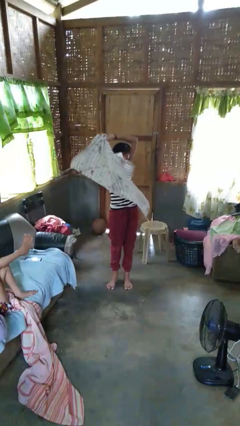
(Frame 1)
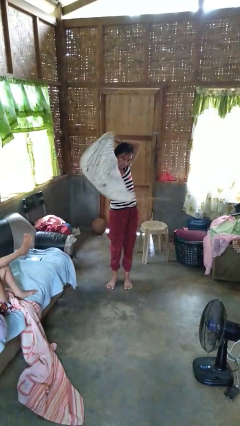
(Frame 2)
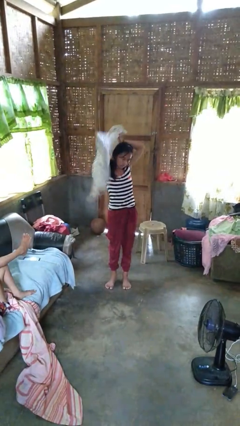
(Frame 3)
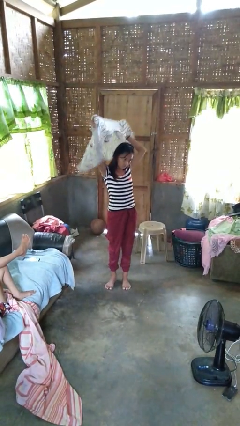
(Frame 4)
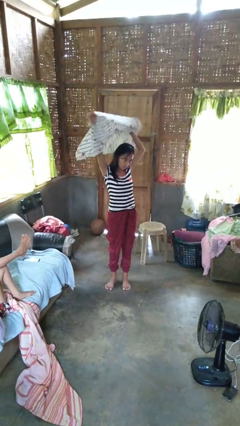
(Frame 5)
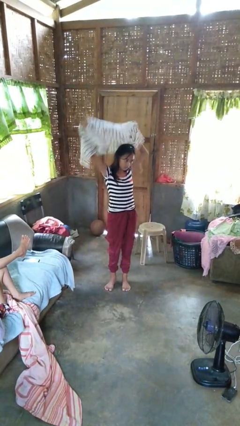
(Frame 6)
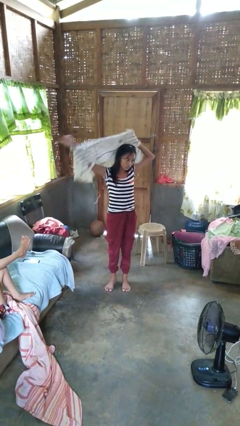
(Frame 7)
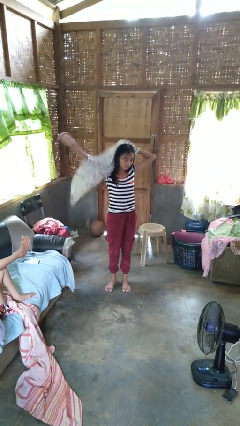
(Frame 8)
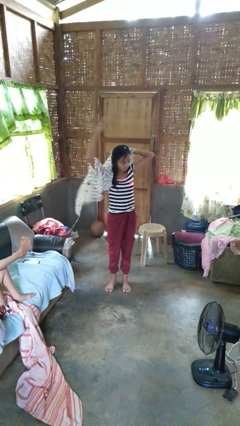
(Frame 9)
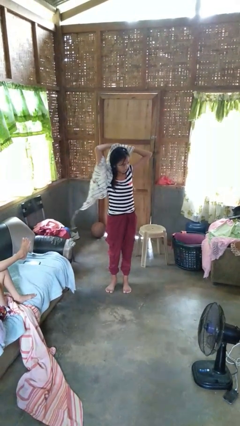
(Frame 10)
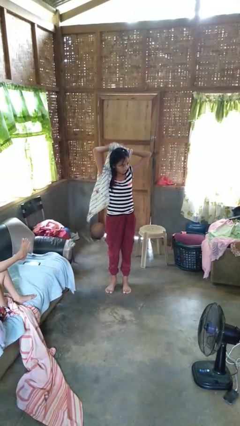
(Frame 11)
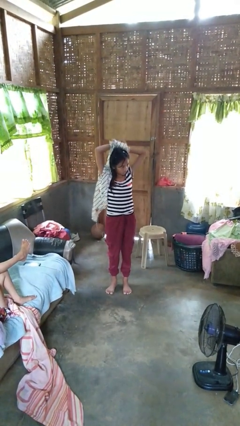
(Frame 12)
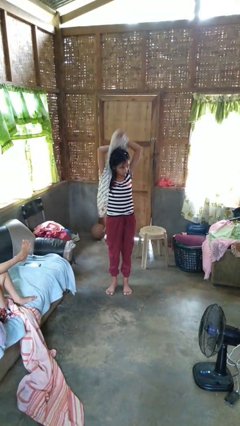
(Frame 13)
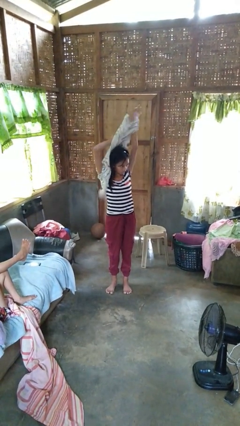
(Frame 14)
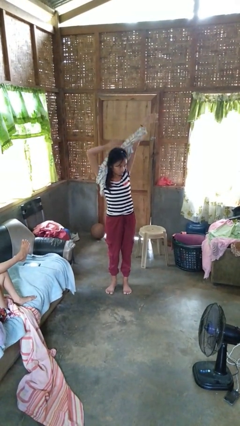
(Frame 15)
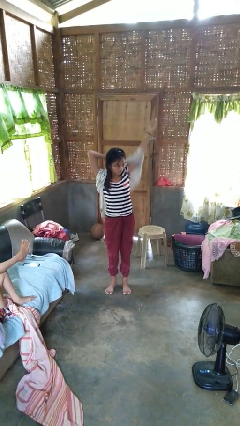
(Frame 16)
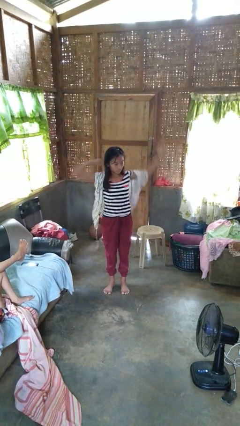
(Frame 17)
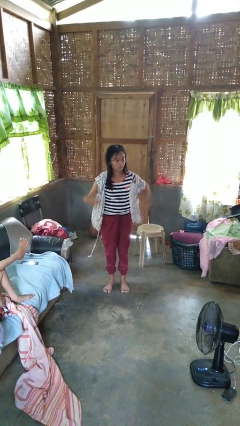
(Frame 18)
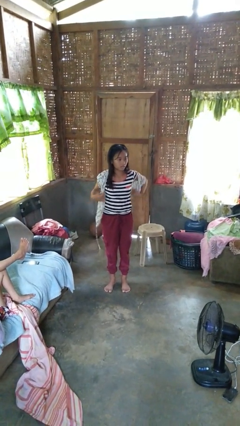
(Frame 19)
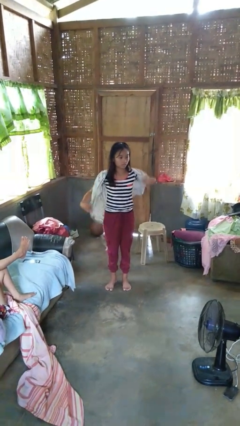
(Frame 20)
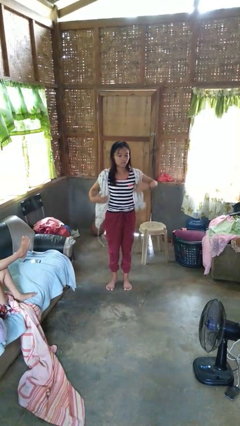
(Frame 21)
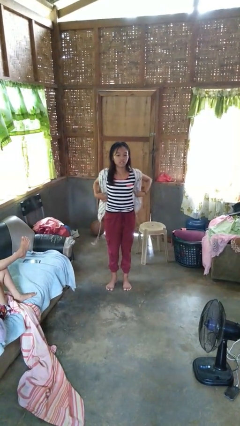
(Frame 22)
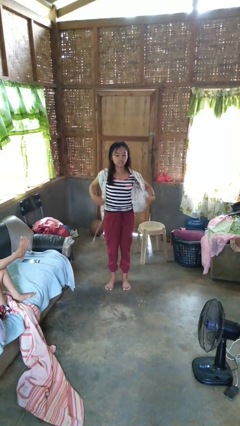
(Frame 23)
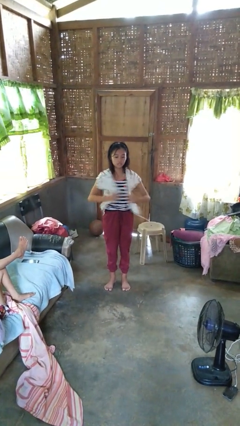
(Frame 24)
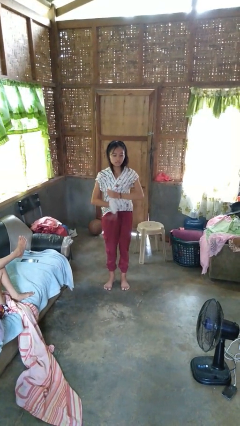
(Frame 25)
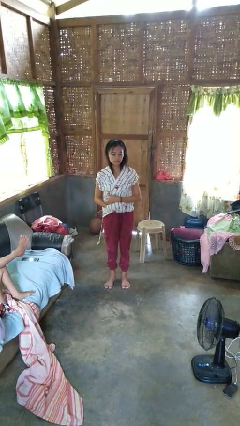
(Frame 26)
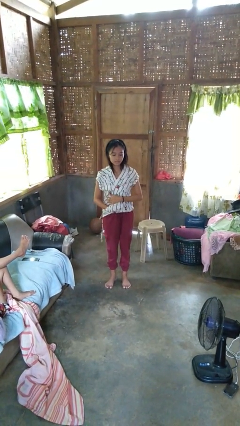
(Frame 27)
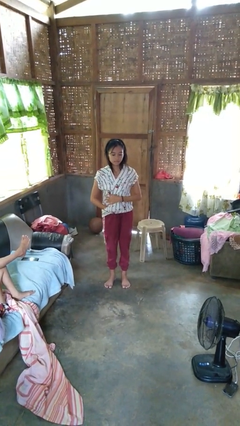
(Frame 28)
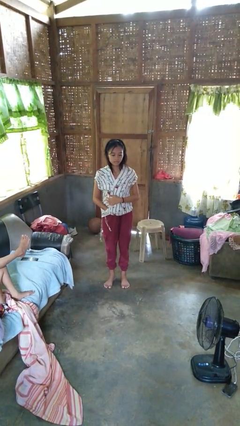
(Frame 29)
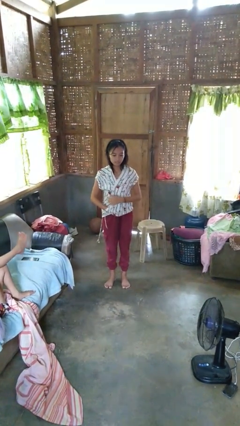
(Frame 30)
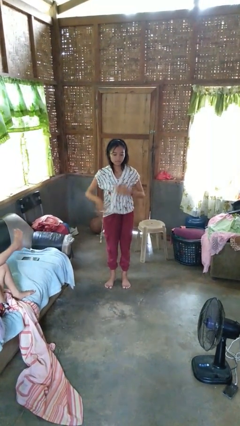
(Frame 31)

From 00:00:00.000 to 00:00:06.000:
person puts on shirt

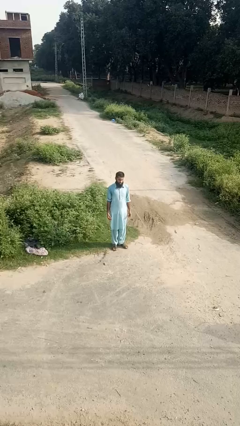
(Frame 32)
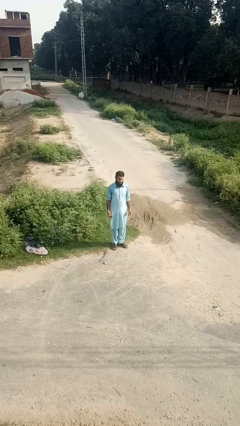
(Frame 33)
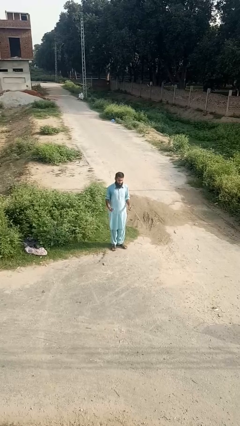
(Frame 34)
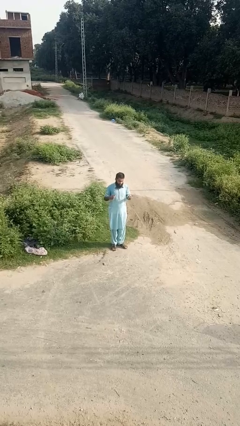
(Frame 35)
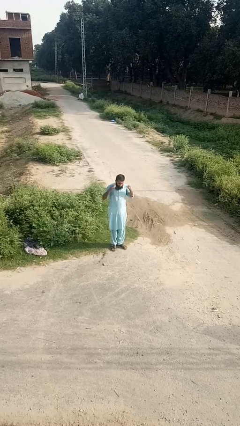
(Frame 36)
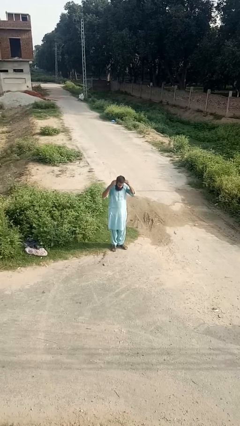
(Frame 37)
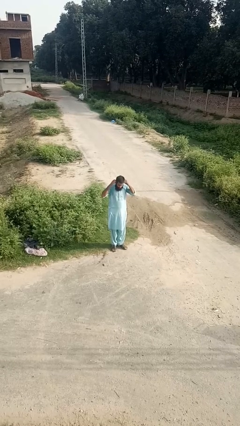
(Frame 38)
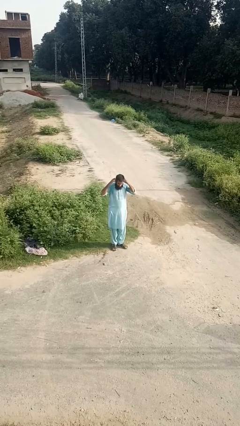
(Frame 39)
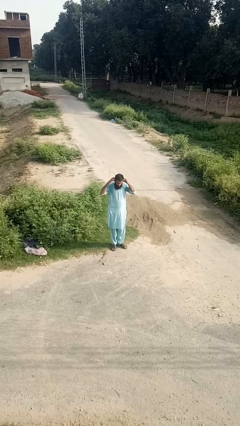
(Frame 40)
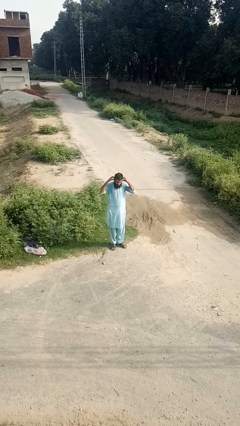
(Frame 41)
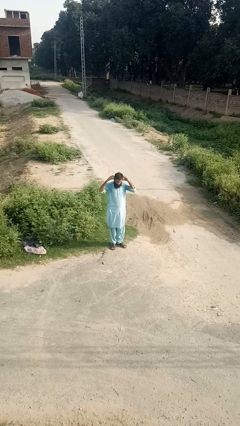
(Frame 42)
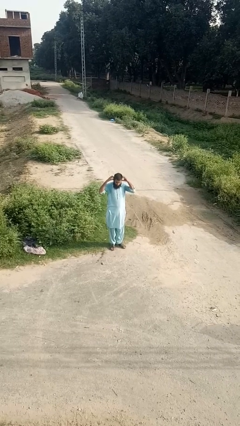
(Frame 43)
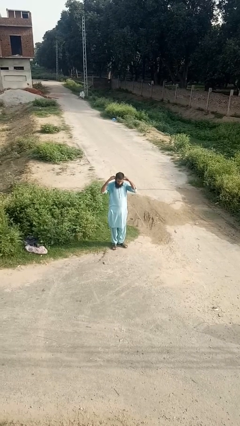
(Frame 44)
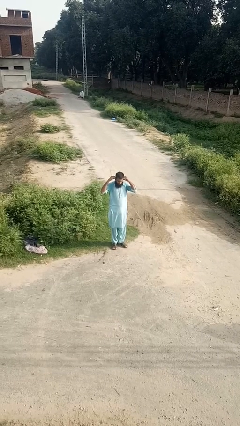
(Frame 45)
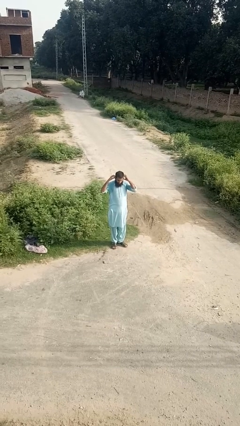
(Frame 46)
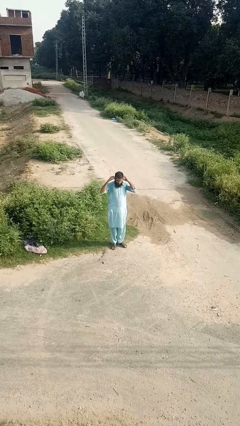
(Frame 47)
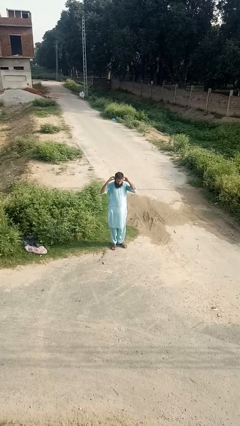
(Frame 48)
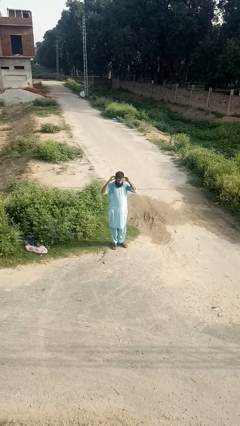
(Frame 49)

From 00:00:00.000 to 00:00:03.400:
person puts on earrings

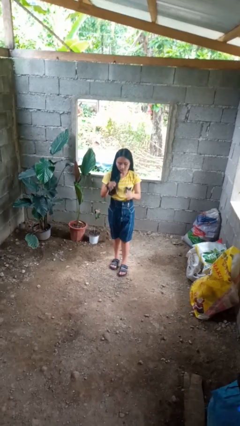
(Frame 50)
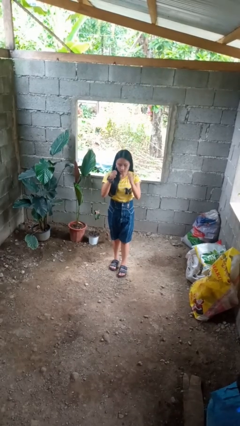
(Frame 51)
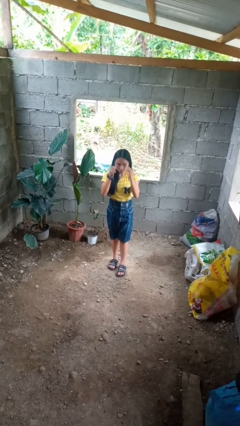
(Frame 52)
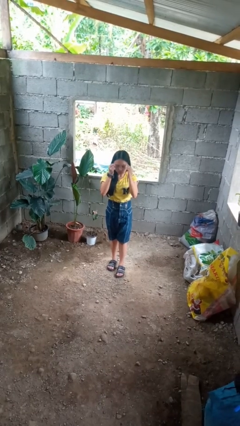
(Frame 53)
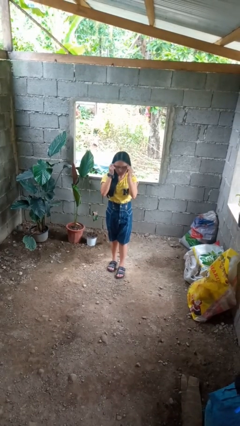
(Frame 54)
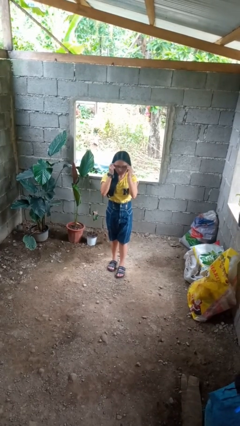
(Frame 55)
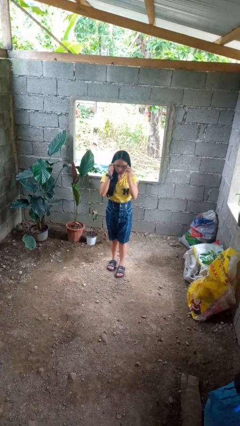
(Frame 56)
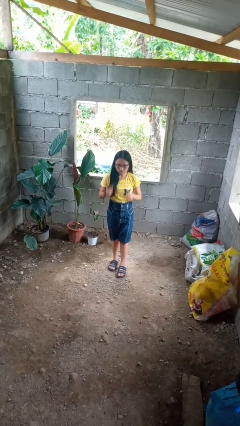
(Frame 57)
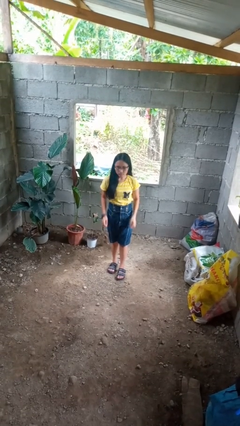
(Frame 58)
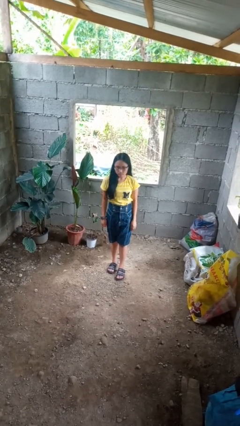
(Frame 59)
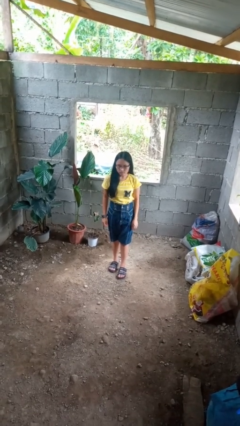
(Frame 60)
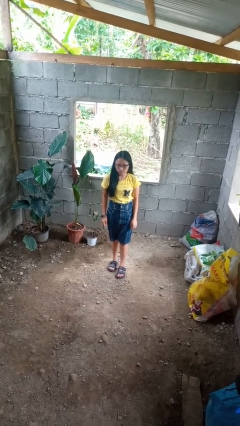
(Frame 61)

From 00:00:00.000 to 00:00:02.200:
person puts on glasses

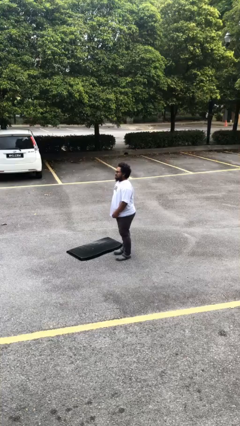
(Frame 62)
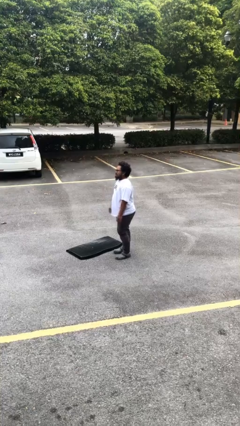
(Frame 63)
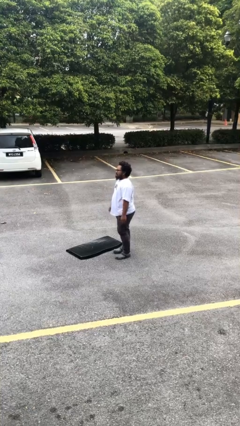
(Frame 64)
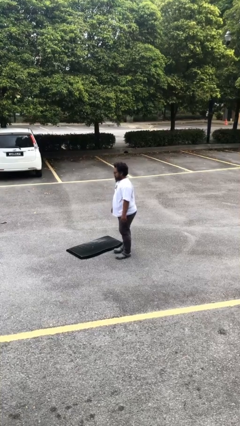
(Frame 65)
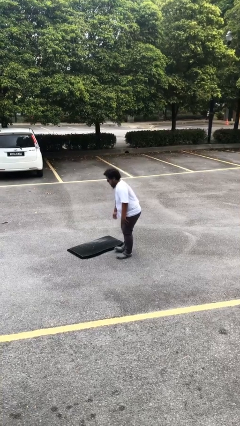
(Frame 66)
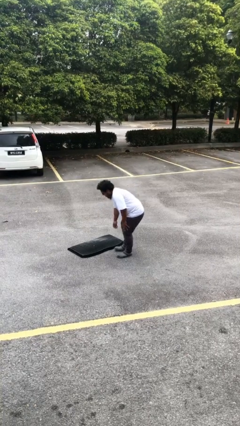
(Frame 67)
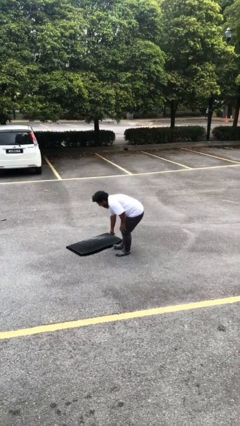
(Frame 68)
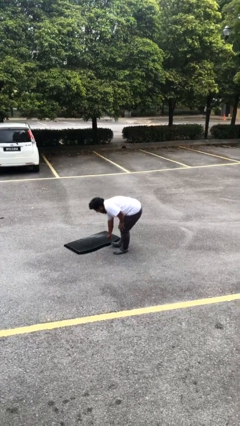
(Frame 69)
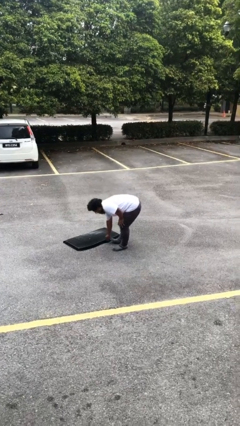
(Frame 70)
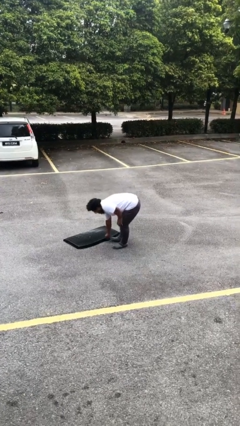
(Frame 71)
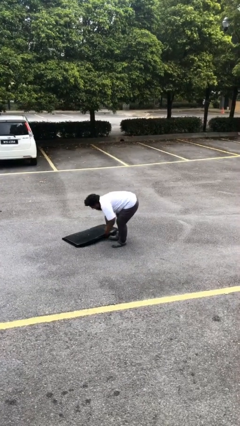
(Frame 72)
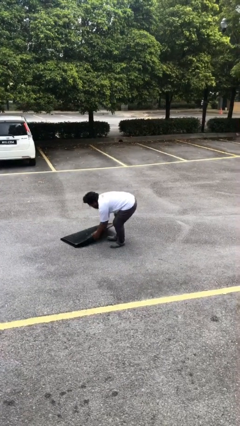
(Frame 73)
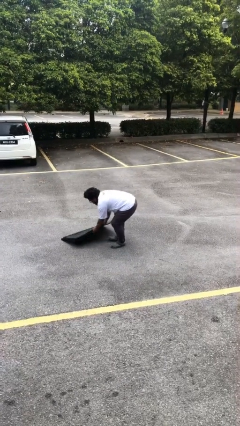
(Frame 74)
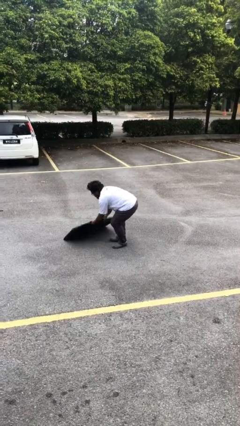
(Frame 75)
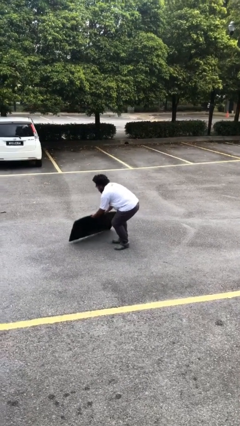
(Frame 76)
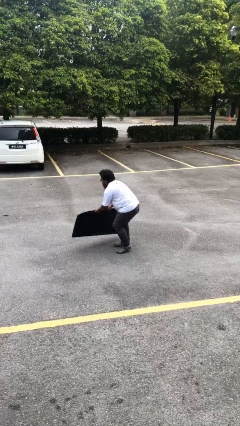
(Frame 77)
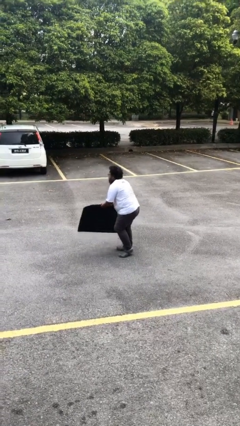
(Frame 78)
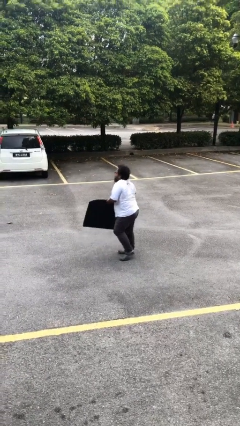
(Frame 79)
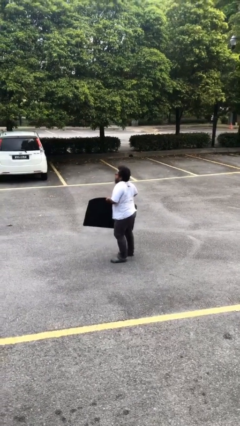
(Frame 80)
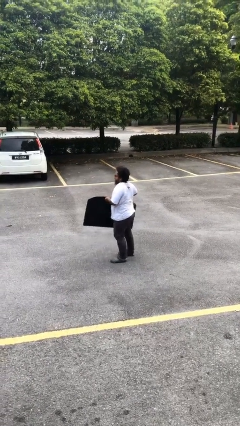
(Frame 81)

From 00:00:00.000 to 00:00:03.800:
person picks up object from floor

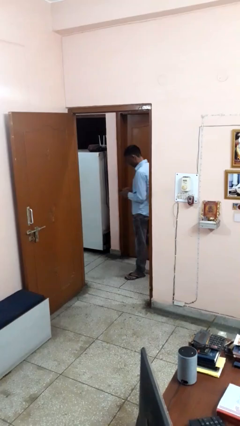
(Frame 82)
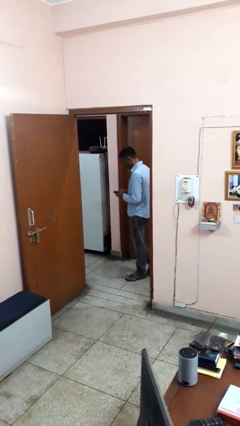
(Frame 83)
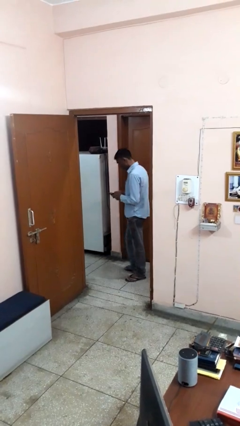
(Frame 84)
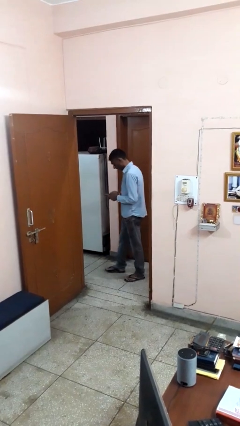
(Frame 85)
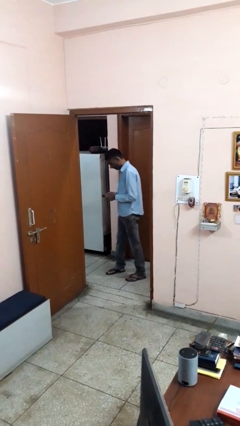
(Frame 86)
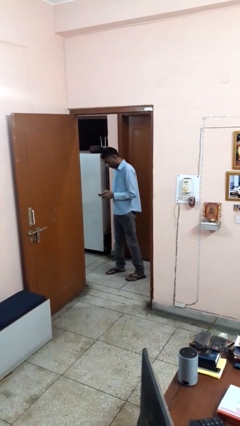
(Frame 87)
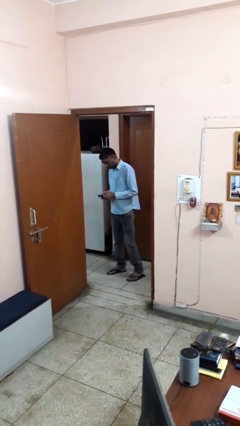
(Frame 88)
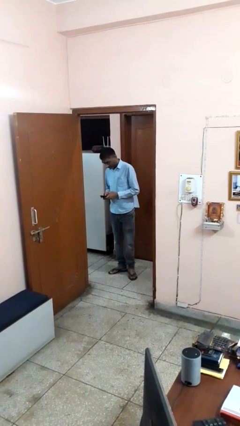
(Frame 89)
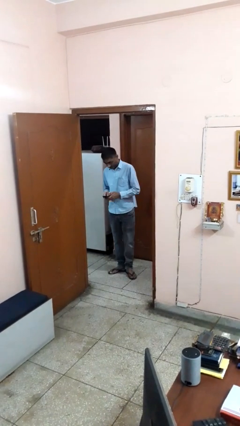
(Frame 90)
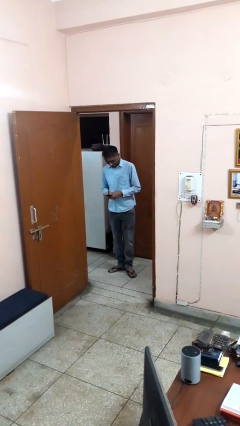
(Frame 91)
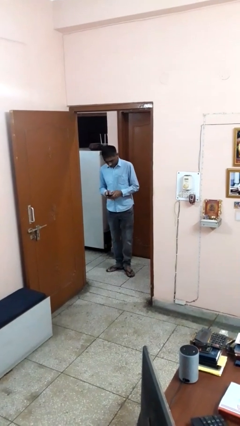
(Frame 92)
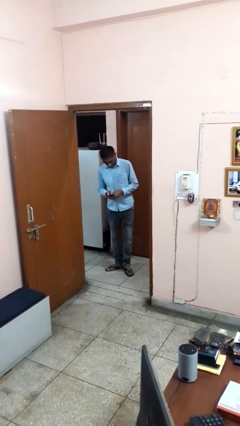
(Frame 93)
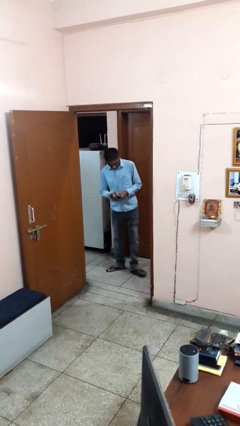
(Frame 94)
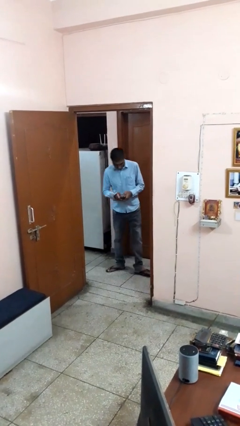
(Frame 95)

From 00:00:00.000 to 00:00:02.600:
person enters scene through structure
